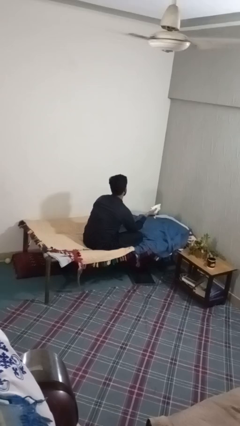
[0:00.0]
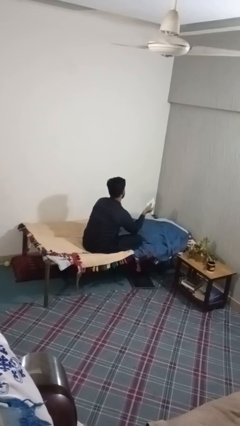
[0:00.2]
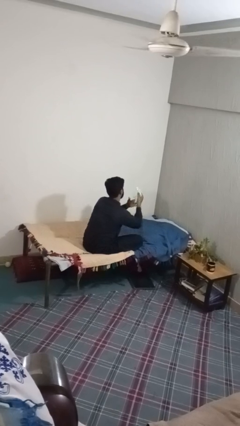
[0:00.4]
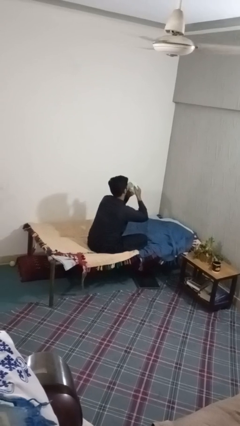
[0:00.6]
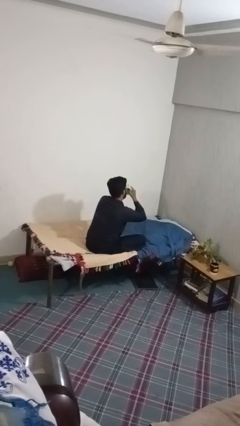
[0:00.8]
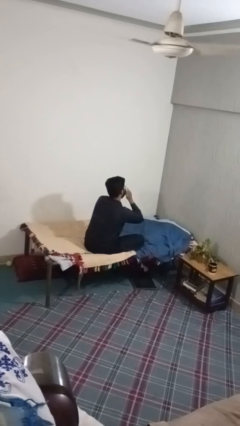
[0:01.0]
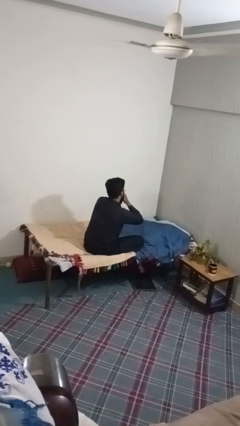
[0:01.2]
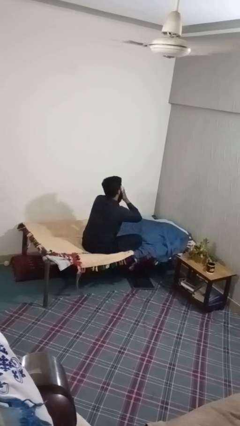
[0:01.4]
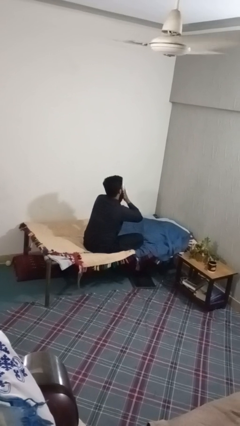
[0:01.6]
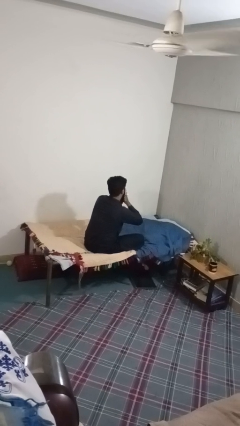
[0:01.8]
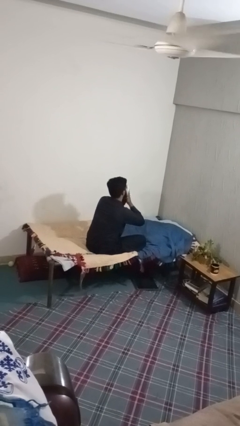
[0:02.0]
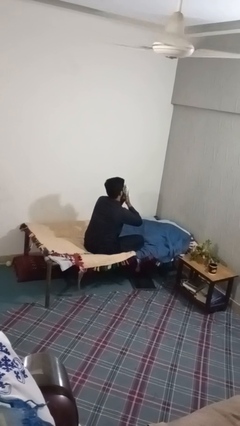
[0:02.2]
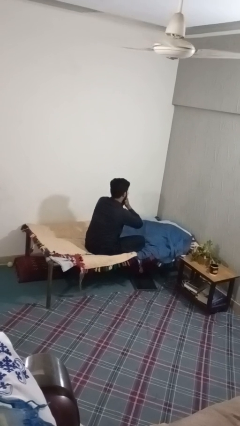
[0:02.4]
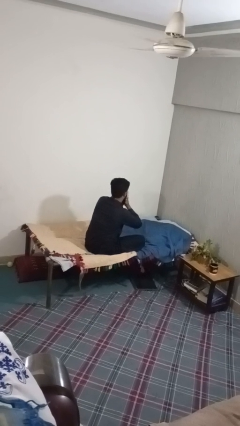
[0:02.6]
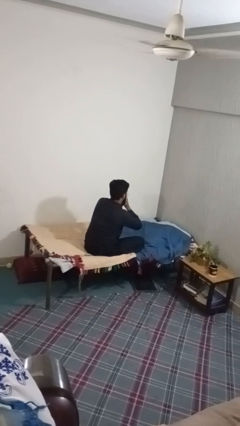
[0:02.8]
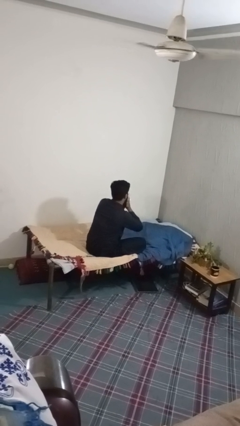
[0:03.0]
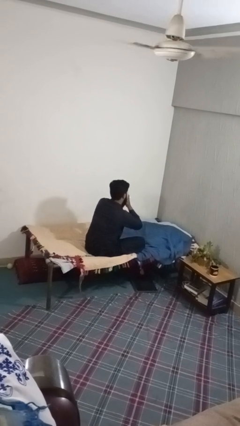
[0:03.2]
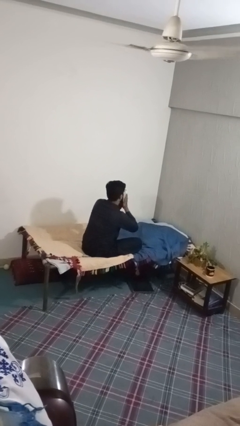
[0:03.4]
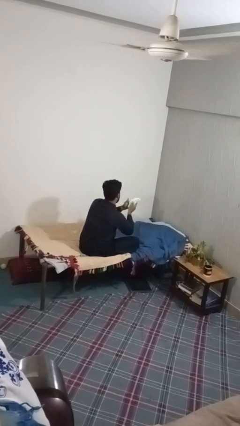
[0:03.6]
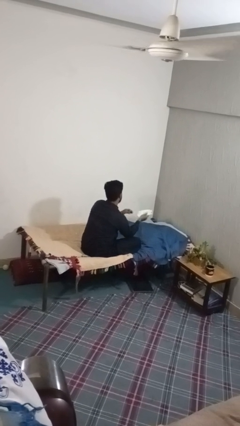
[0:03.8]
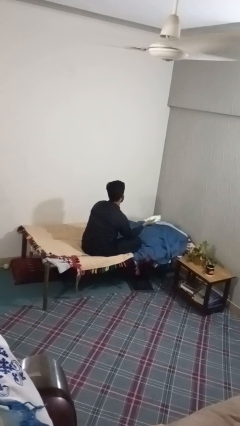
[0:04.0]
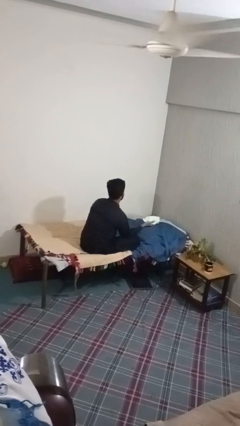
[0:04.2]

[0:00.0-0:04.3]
person blows nose

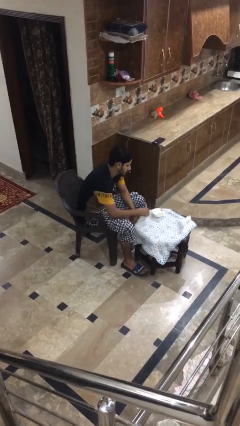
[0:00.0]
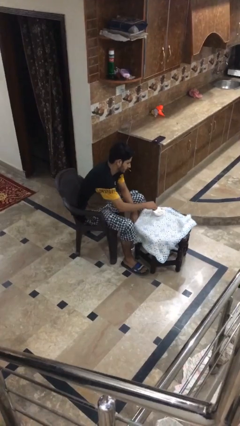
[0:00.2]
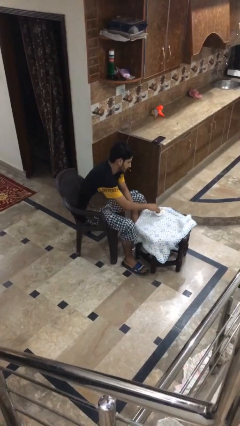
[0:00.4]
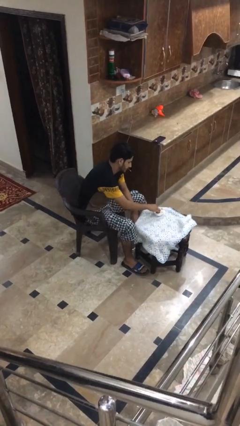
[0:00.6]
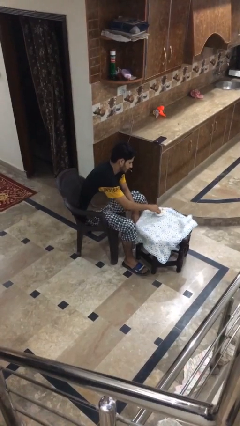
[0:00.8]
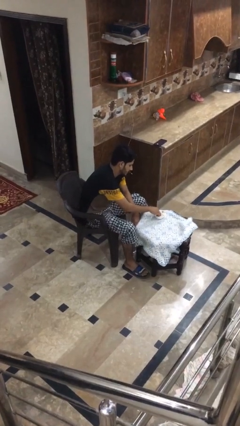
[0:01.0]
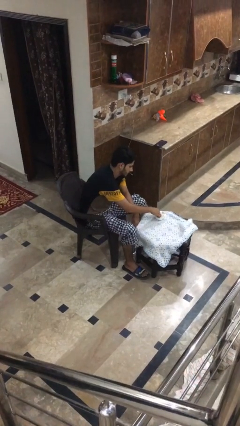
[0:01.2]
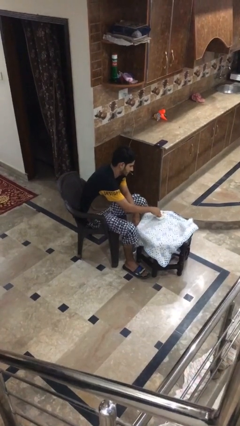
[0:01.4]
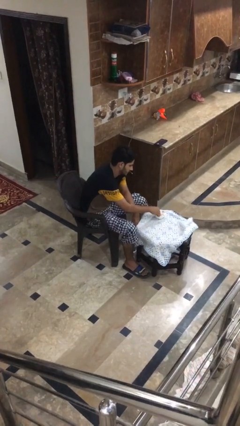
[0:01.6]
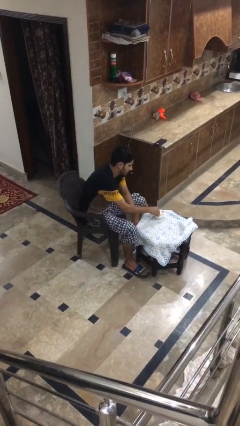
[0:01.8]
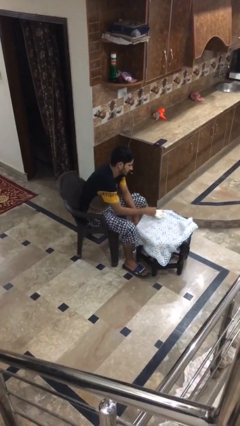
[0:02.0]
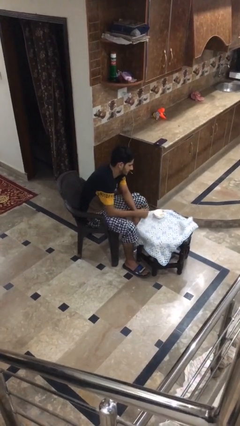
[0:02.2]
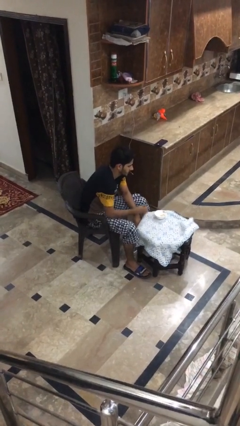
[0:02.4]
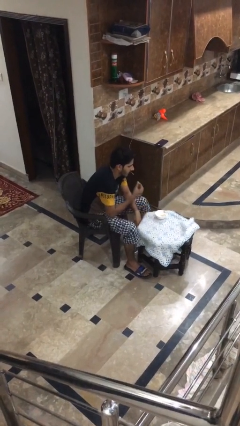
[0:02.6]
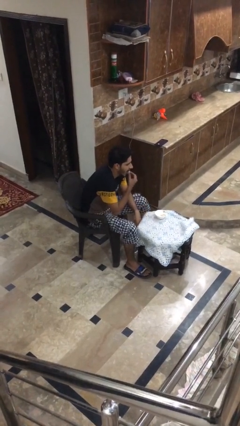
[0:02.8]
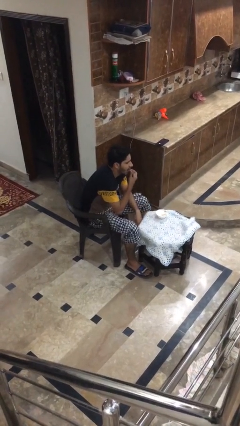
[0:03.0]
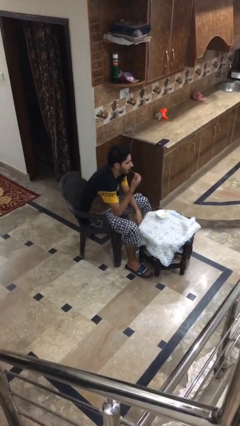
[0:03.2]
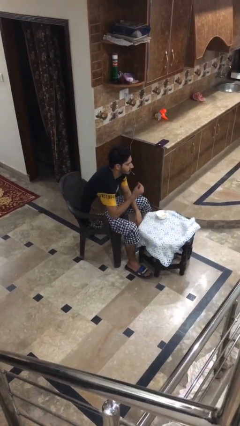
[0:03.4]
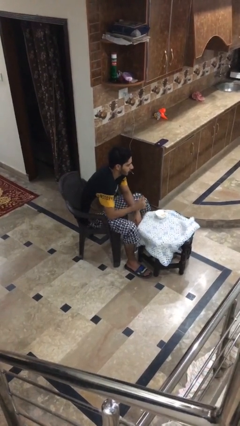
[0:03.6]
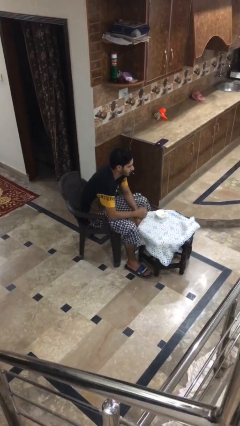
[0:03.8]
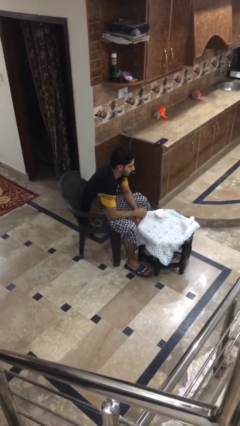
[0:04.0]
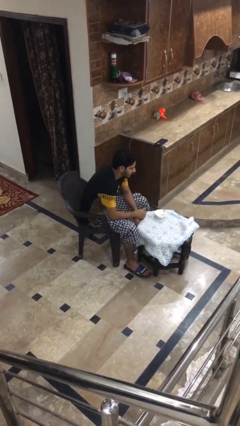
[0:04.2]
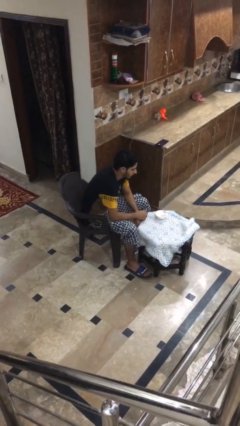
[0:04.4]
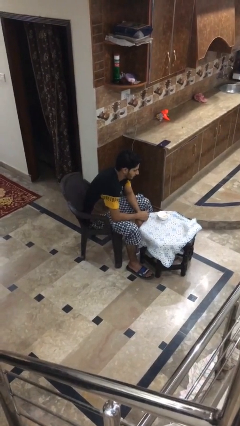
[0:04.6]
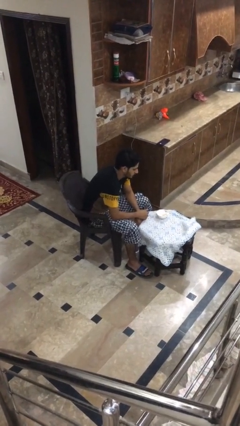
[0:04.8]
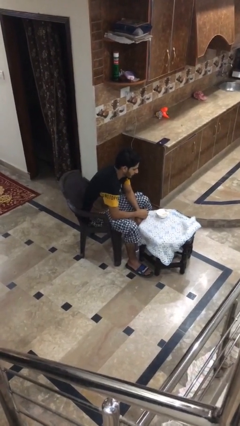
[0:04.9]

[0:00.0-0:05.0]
person eats with hands

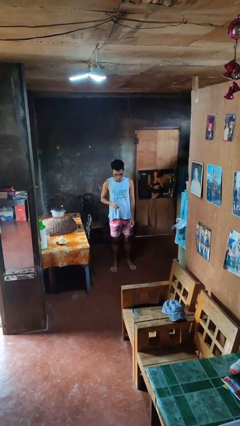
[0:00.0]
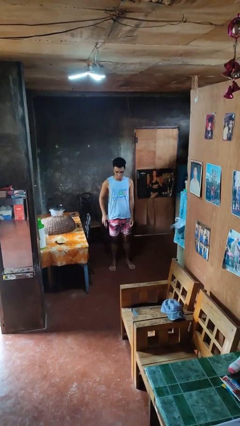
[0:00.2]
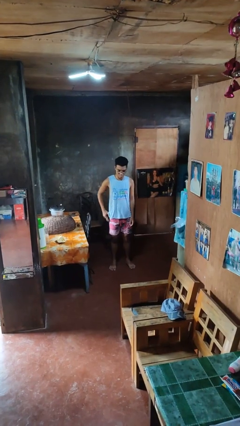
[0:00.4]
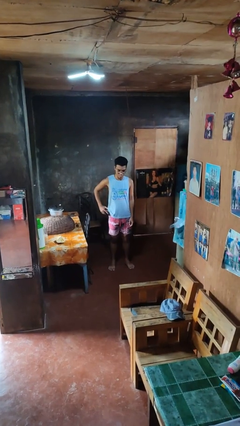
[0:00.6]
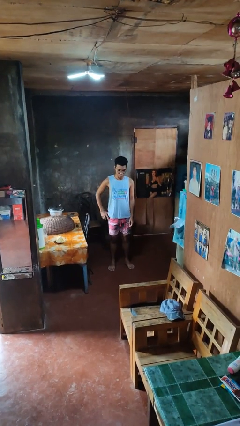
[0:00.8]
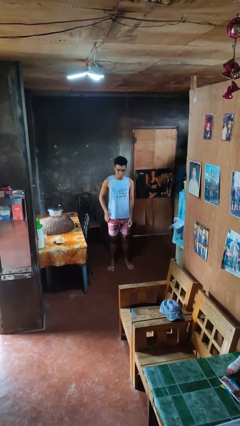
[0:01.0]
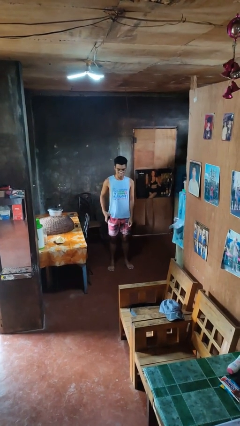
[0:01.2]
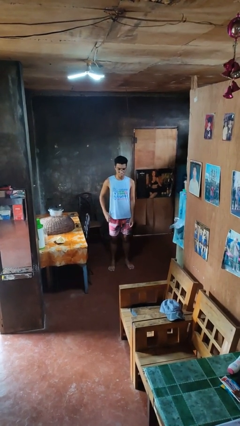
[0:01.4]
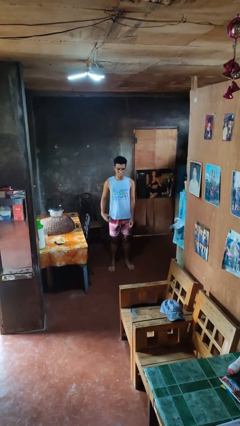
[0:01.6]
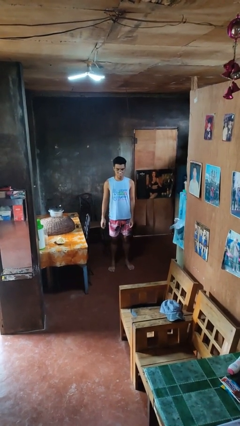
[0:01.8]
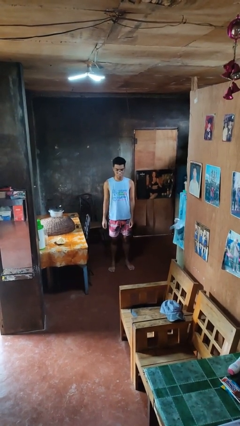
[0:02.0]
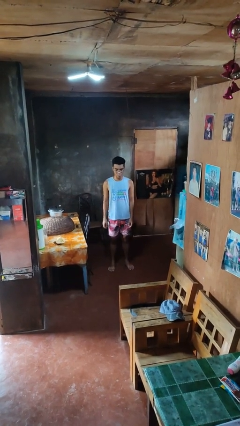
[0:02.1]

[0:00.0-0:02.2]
person puts phone into pocket

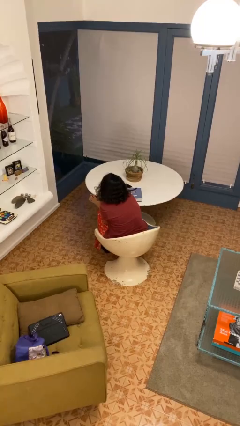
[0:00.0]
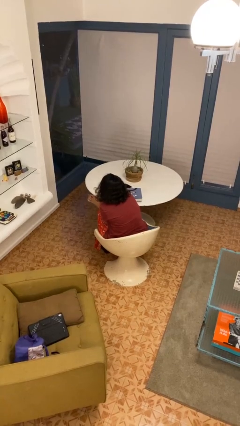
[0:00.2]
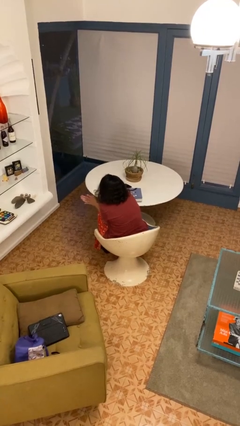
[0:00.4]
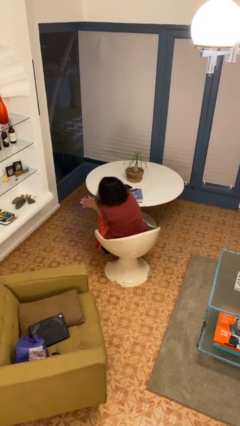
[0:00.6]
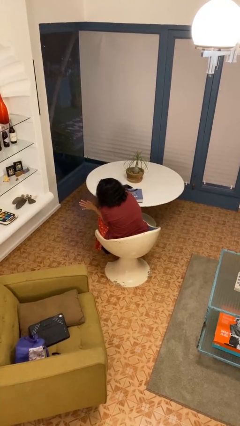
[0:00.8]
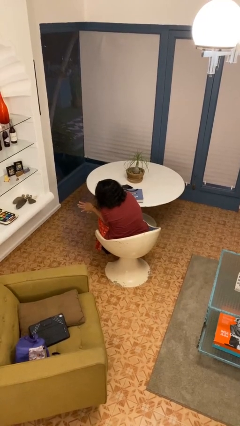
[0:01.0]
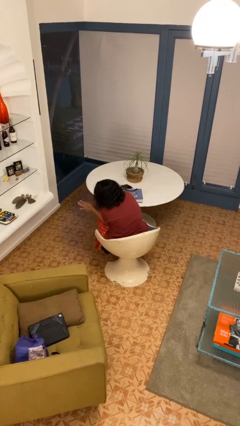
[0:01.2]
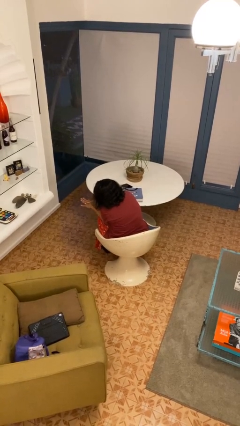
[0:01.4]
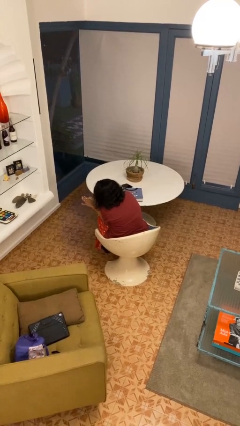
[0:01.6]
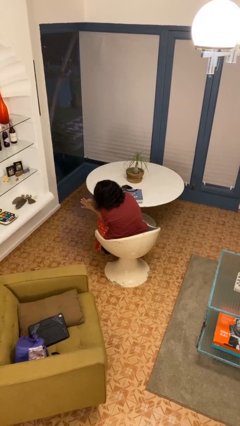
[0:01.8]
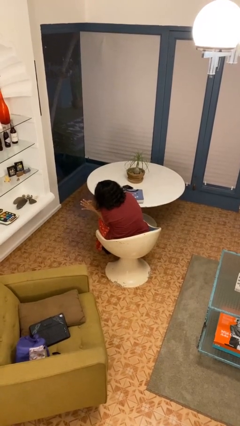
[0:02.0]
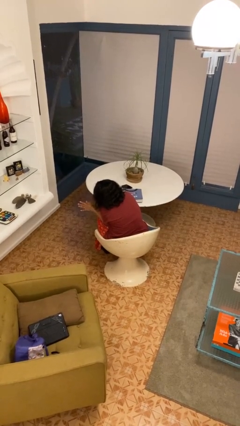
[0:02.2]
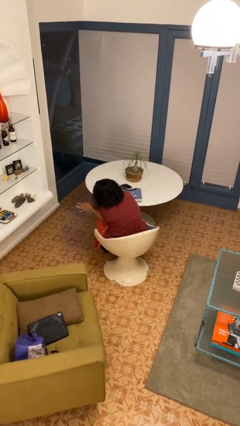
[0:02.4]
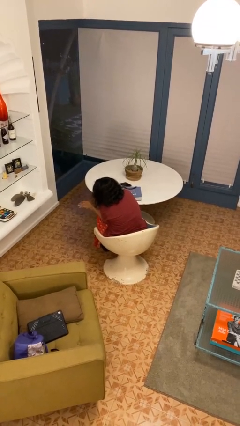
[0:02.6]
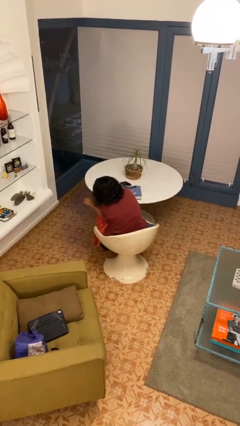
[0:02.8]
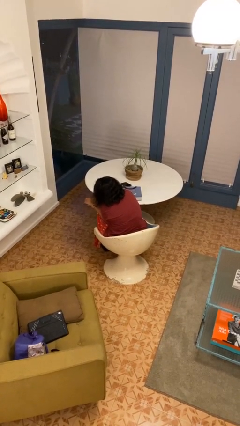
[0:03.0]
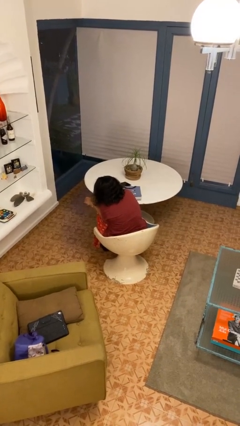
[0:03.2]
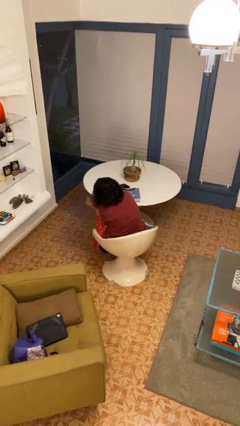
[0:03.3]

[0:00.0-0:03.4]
person looks at hands in lap

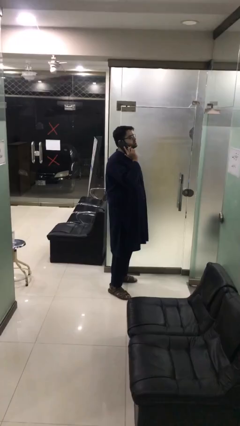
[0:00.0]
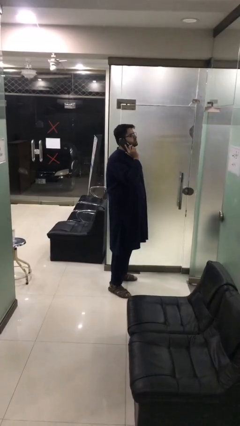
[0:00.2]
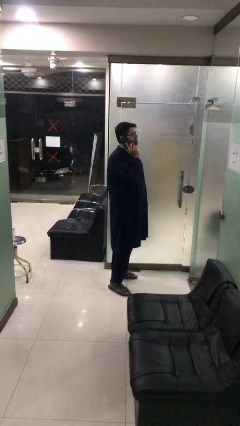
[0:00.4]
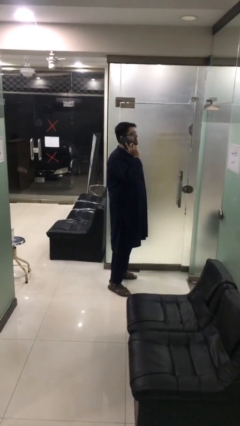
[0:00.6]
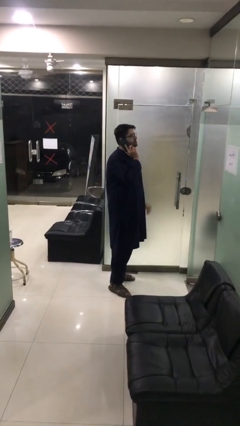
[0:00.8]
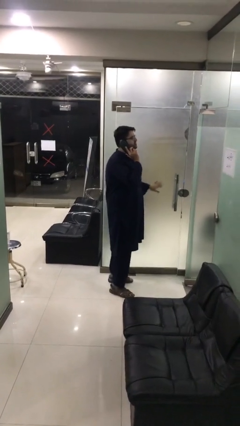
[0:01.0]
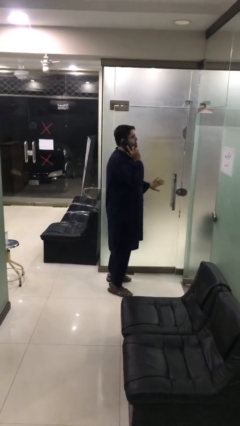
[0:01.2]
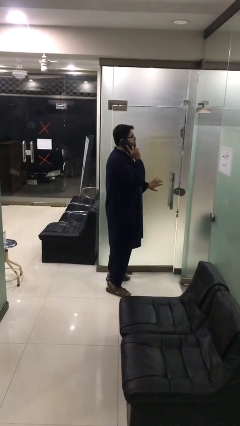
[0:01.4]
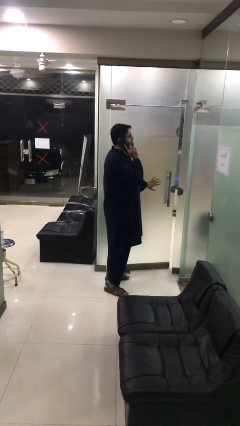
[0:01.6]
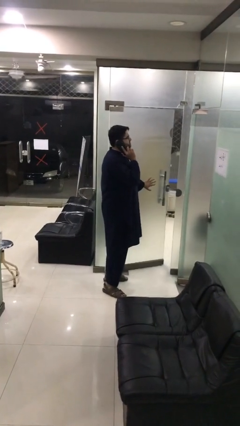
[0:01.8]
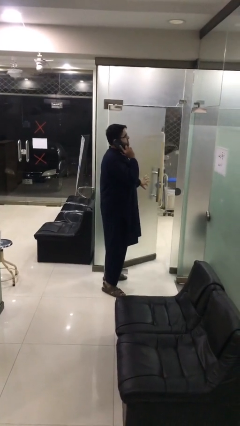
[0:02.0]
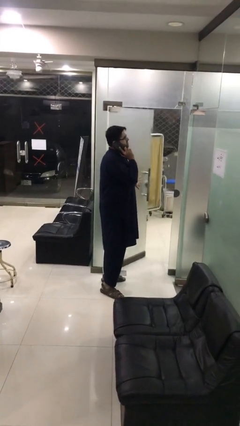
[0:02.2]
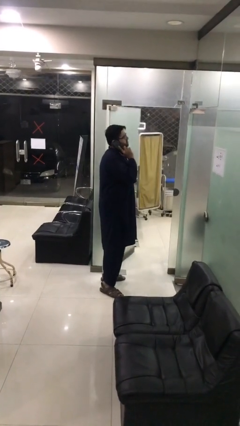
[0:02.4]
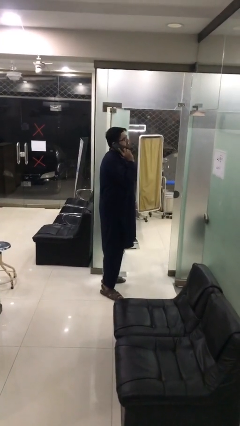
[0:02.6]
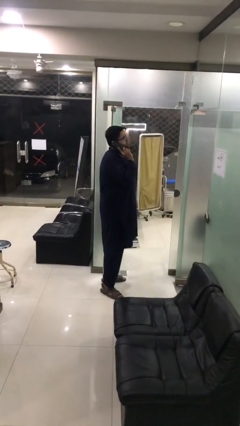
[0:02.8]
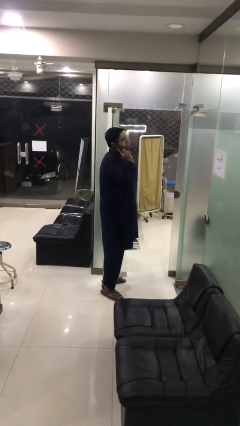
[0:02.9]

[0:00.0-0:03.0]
person opens facility door
